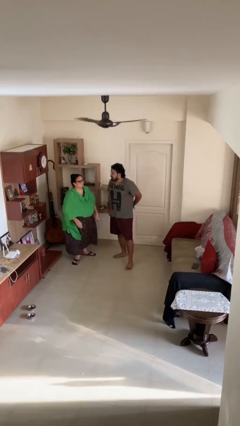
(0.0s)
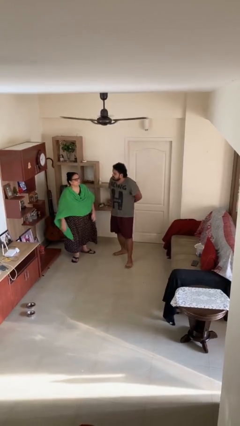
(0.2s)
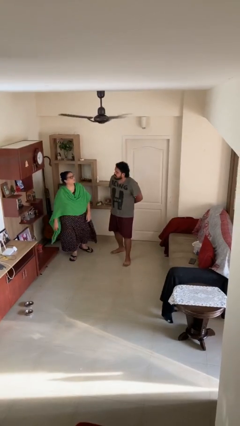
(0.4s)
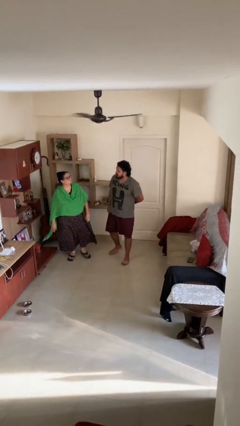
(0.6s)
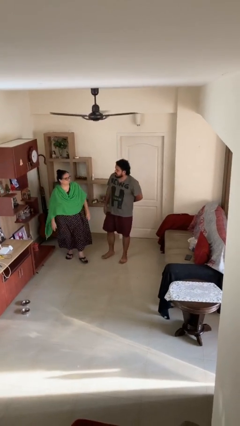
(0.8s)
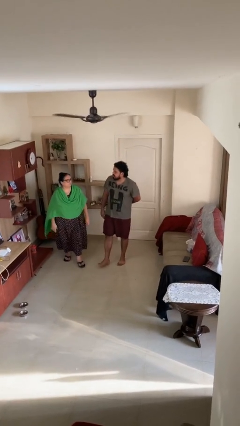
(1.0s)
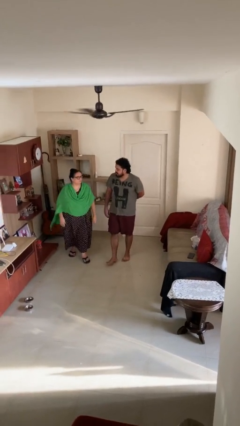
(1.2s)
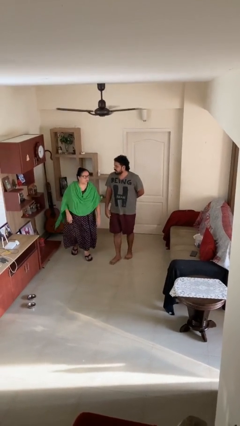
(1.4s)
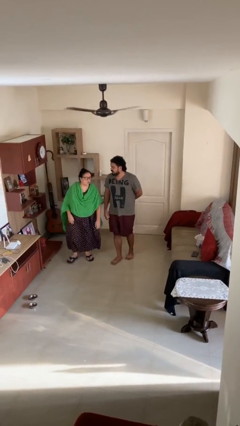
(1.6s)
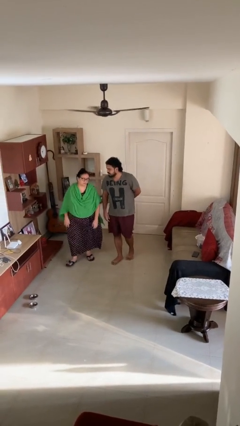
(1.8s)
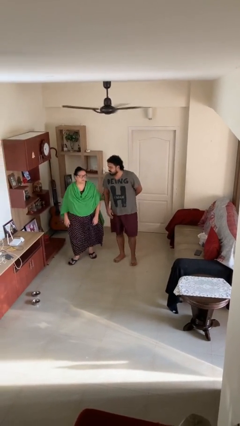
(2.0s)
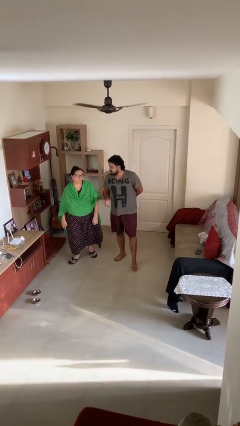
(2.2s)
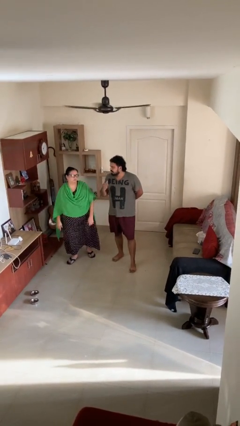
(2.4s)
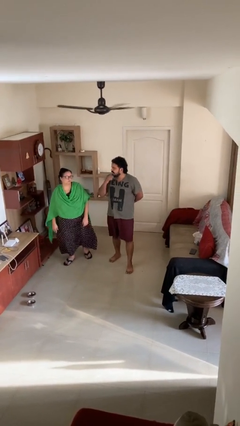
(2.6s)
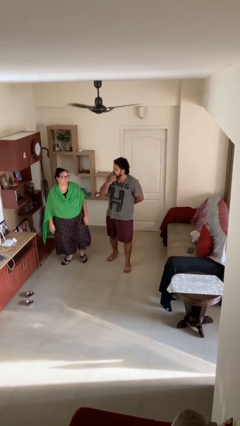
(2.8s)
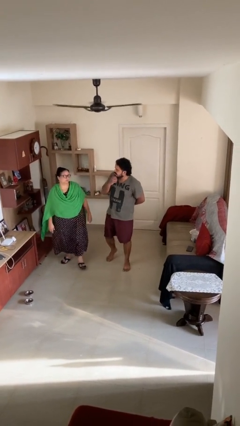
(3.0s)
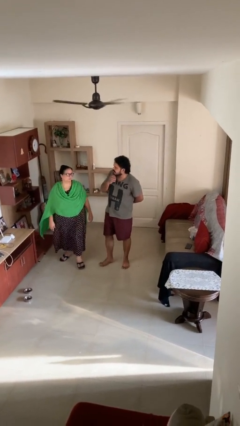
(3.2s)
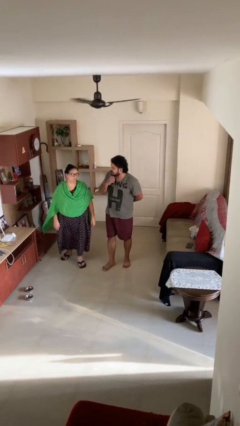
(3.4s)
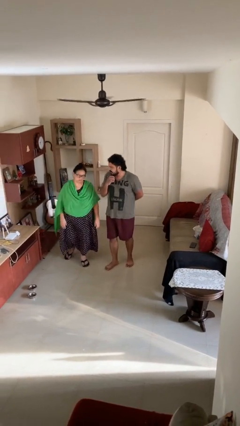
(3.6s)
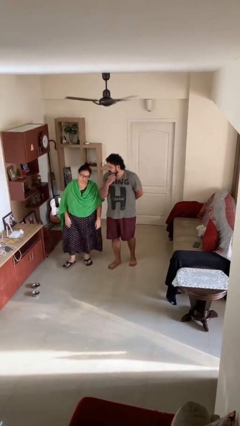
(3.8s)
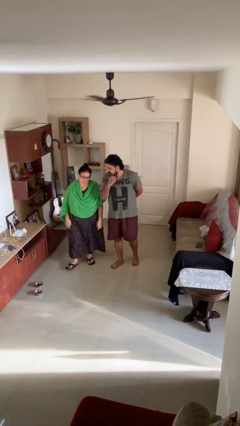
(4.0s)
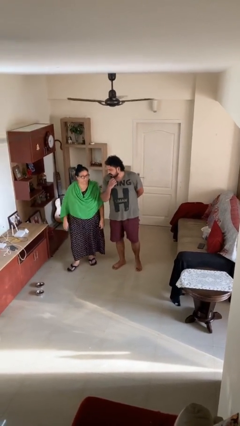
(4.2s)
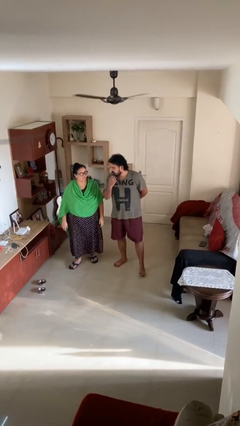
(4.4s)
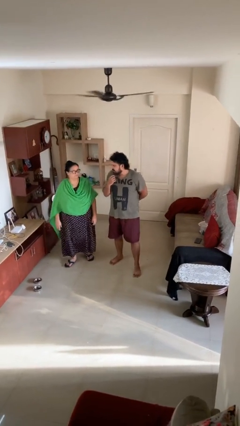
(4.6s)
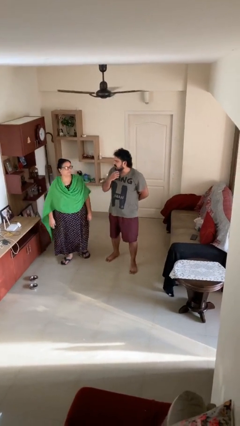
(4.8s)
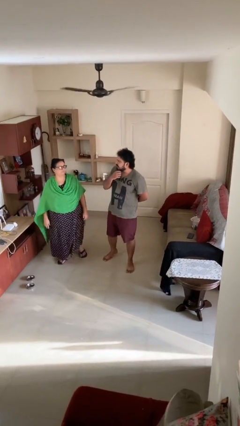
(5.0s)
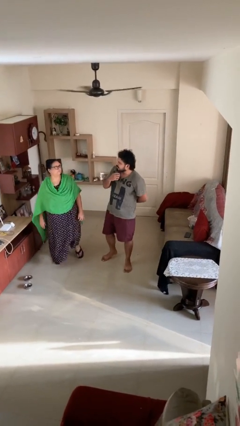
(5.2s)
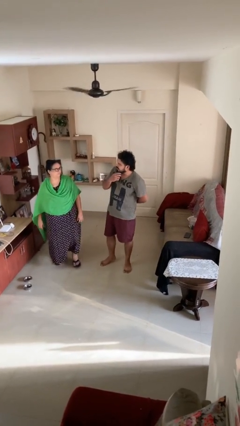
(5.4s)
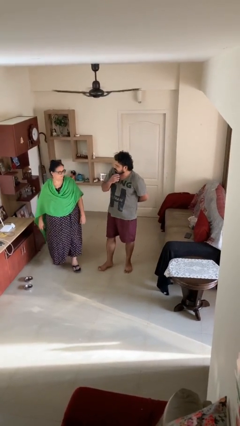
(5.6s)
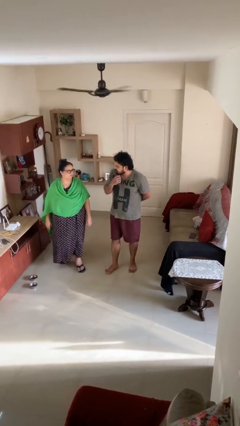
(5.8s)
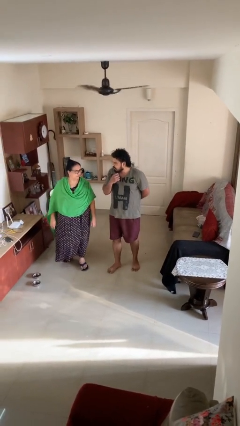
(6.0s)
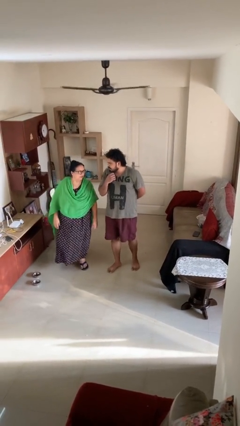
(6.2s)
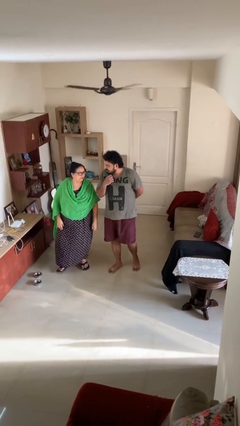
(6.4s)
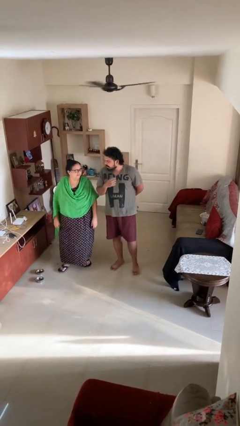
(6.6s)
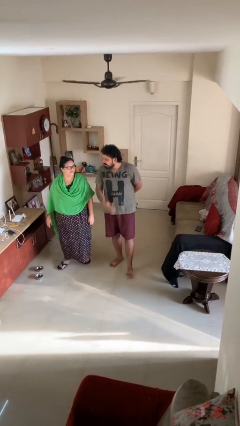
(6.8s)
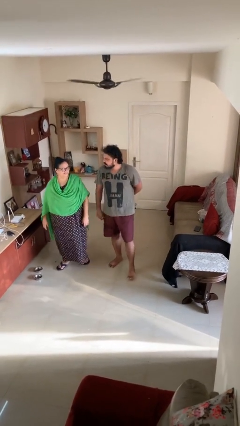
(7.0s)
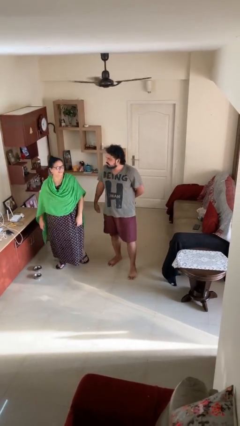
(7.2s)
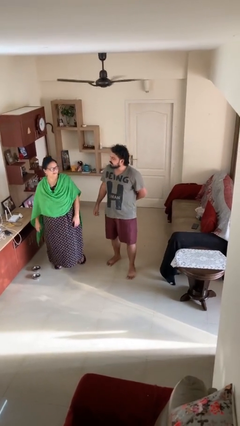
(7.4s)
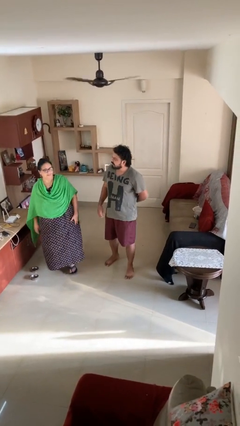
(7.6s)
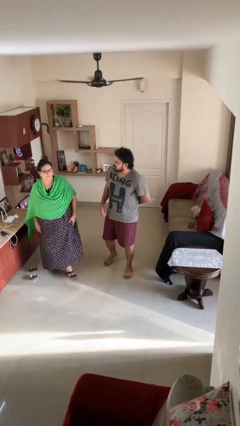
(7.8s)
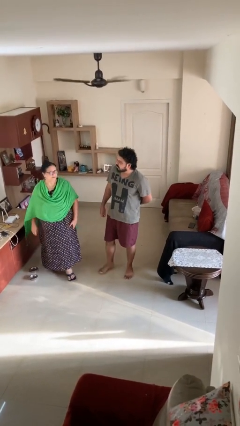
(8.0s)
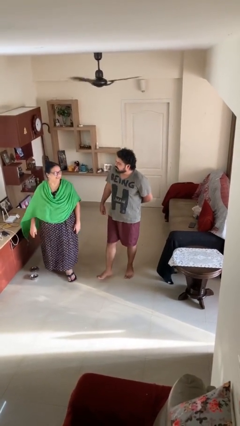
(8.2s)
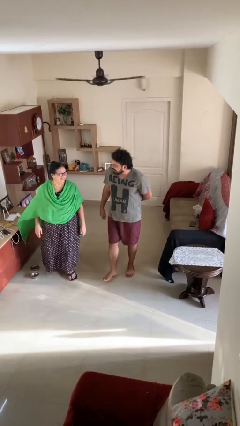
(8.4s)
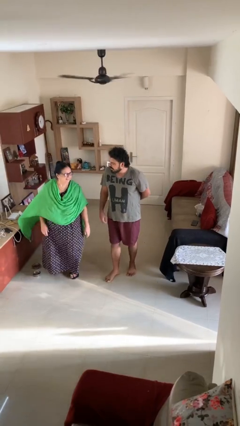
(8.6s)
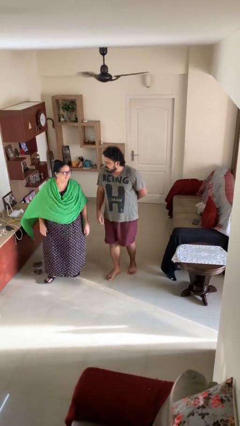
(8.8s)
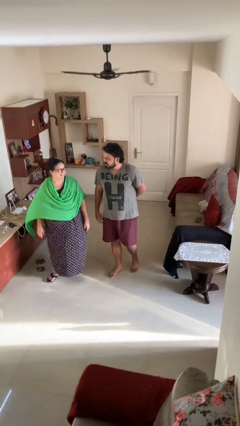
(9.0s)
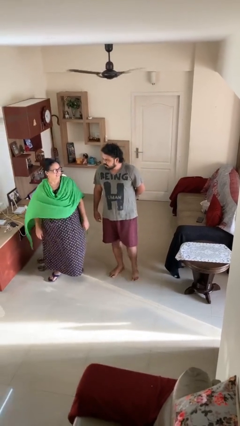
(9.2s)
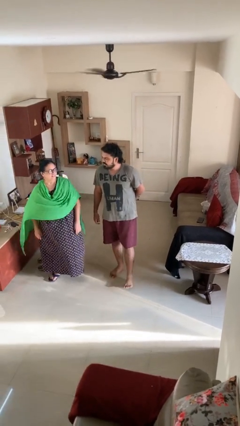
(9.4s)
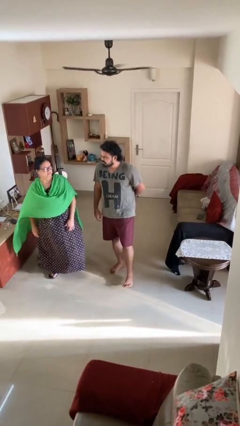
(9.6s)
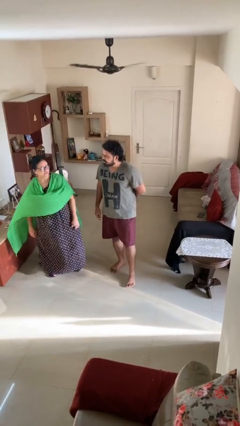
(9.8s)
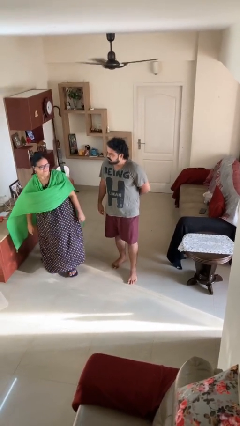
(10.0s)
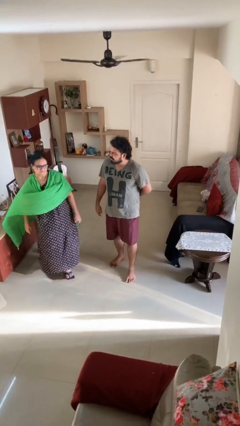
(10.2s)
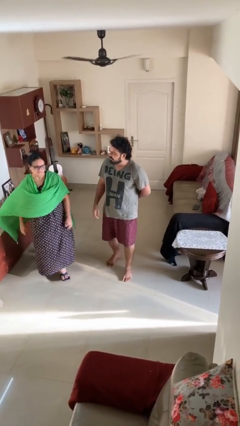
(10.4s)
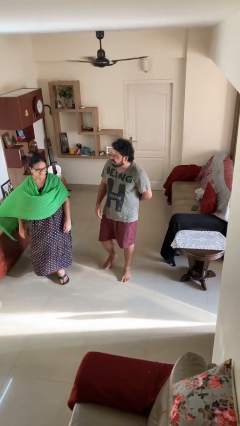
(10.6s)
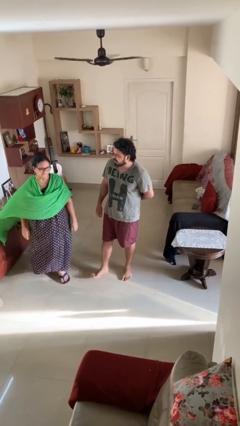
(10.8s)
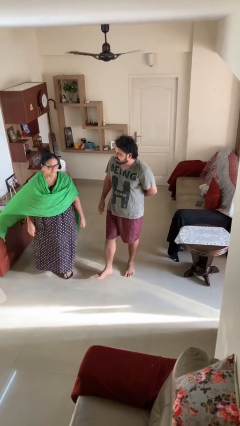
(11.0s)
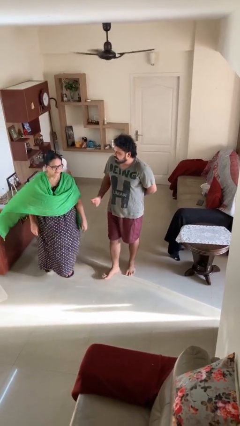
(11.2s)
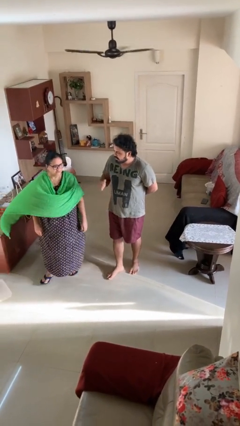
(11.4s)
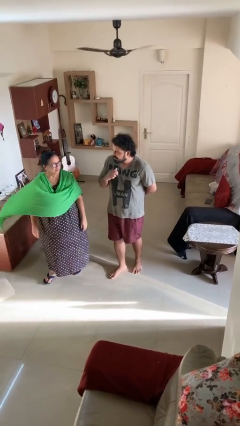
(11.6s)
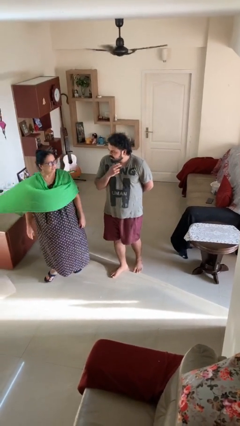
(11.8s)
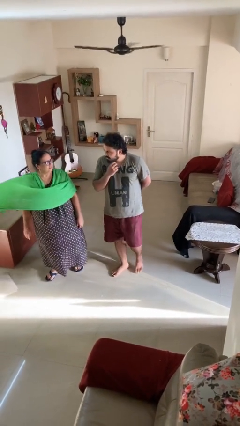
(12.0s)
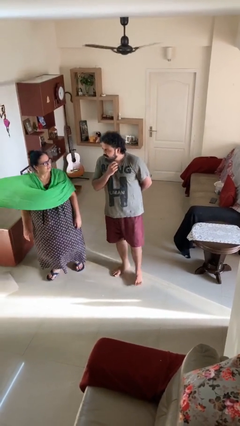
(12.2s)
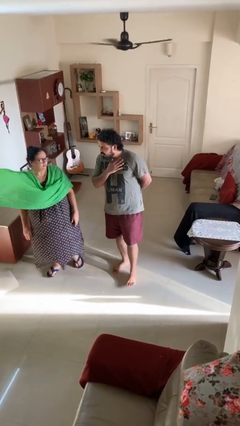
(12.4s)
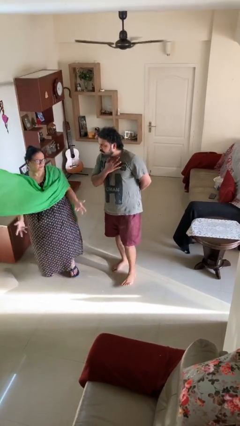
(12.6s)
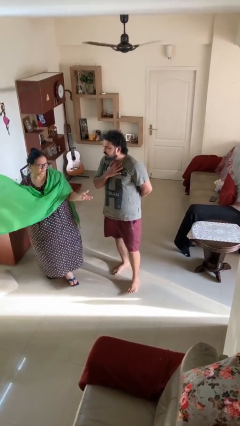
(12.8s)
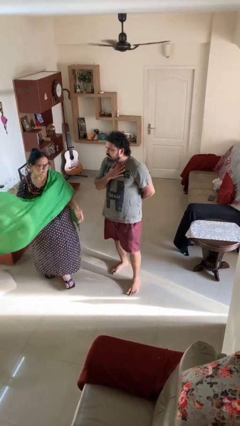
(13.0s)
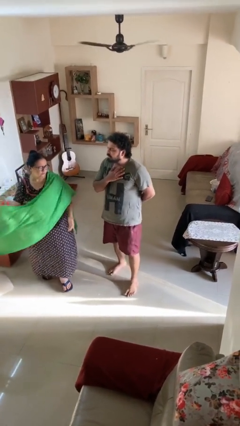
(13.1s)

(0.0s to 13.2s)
person talks to person

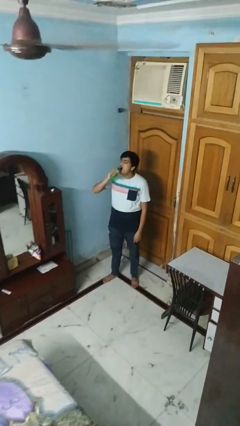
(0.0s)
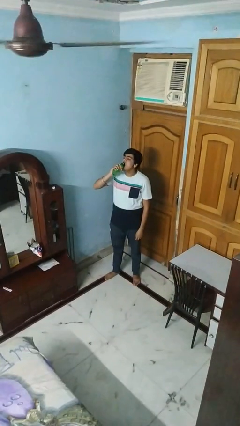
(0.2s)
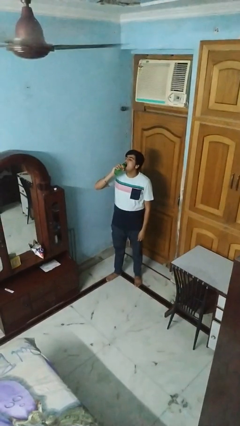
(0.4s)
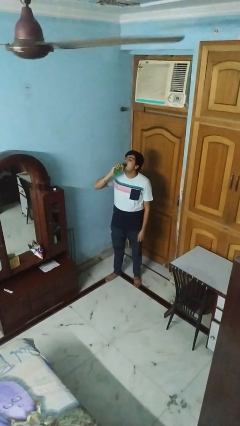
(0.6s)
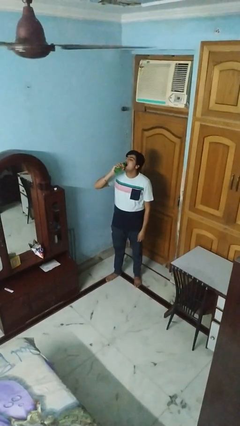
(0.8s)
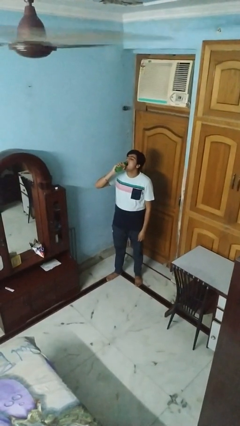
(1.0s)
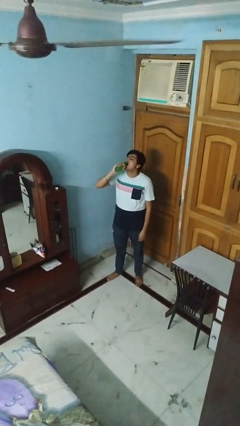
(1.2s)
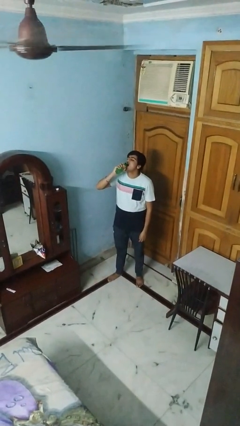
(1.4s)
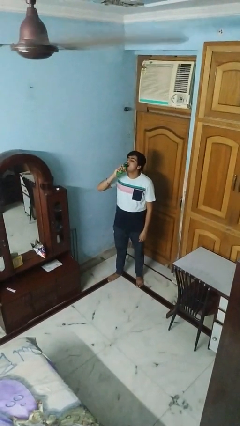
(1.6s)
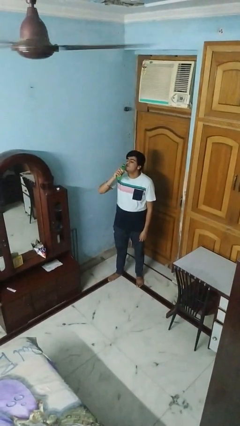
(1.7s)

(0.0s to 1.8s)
person drinks from bottle

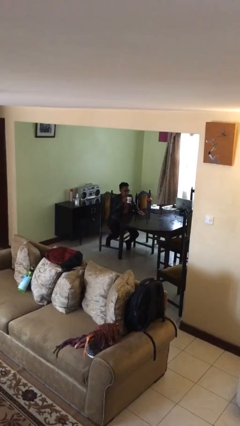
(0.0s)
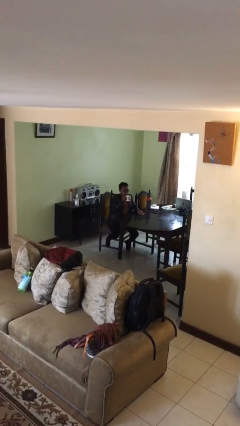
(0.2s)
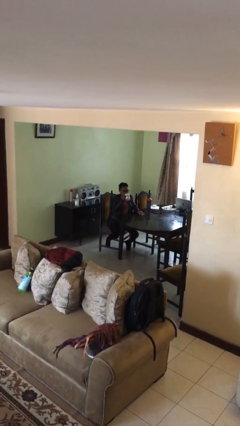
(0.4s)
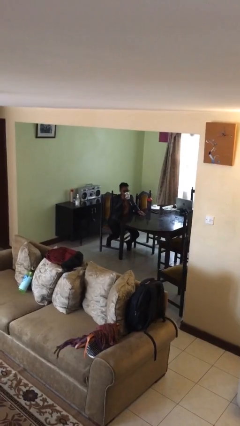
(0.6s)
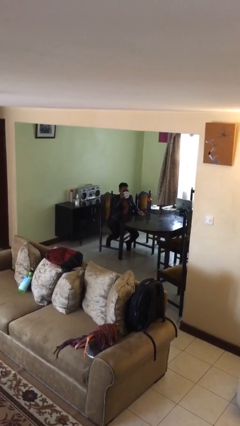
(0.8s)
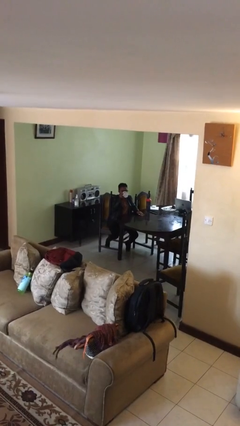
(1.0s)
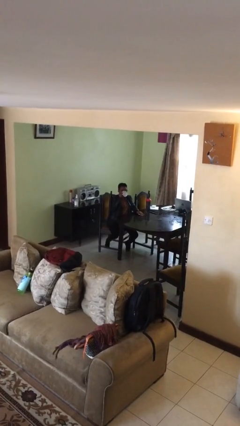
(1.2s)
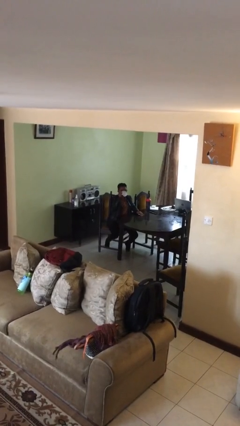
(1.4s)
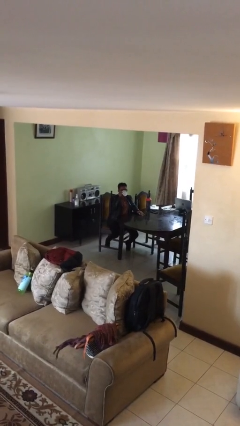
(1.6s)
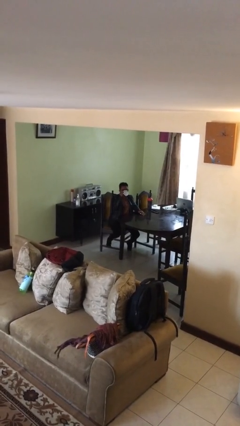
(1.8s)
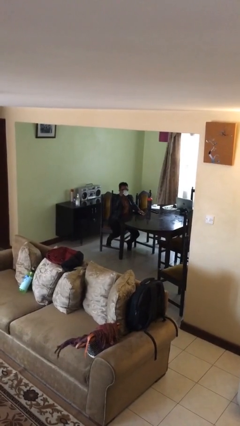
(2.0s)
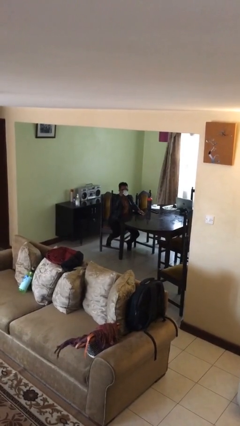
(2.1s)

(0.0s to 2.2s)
person drinks from mug

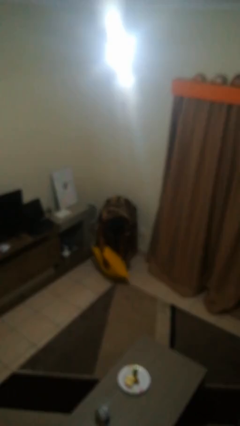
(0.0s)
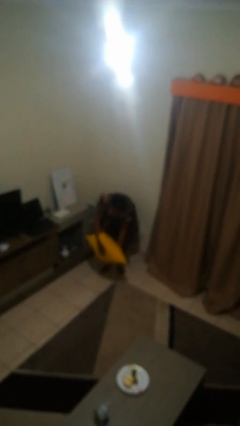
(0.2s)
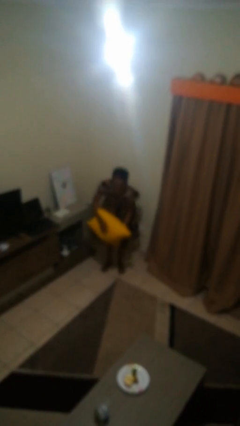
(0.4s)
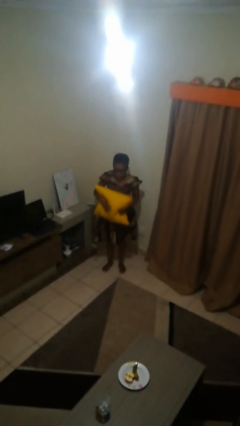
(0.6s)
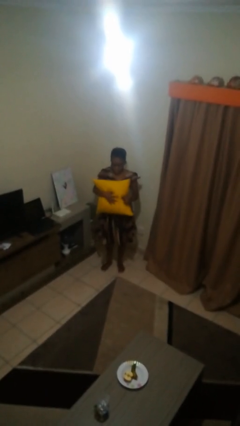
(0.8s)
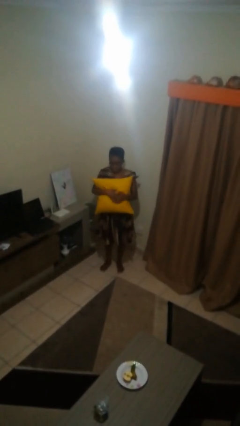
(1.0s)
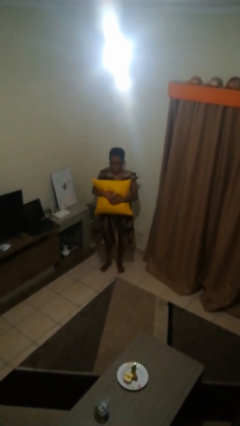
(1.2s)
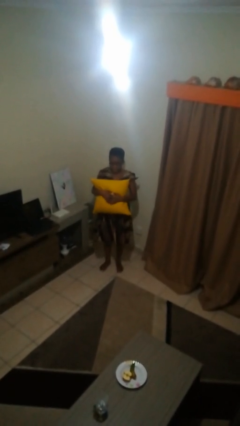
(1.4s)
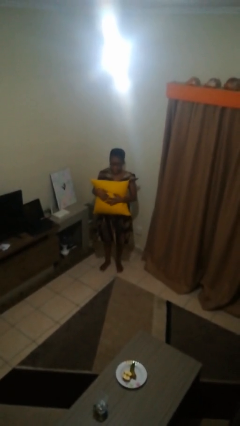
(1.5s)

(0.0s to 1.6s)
person catches dropped object
